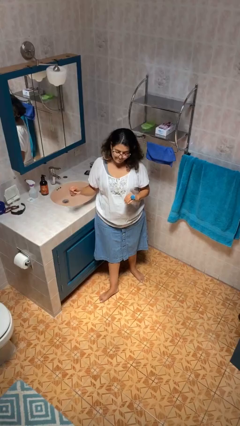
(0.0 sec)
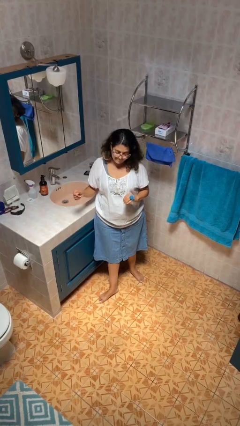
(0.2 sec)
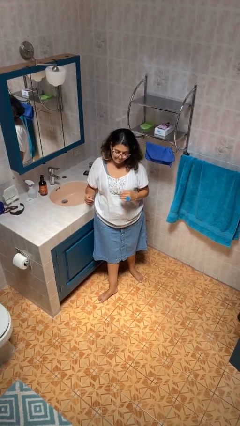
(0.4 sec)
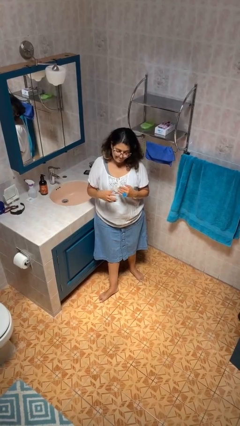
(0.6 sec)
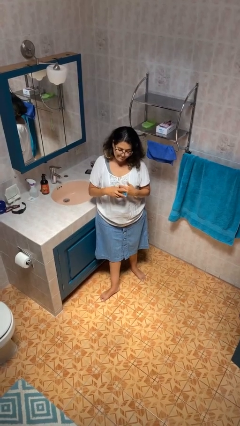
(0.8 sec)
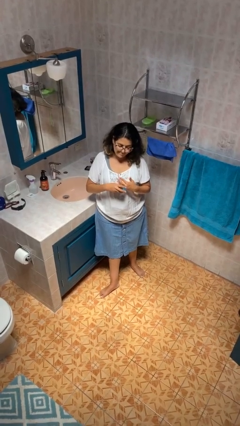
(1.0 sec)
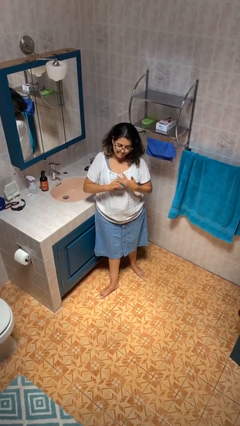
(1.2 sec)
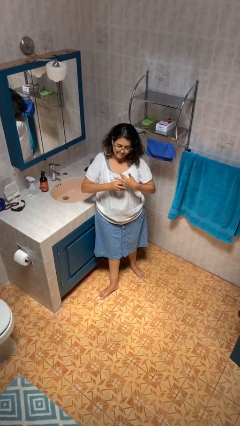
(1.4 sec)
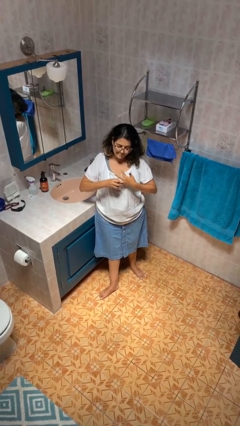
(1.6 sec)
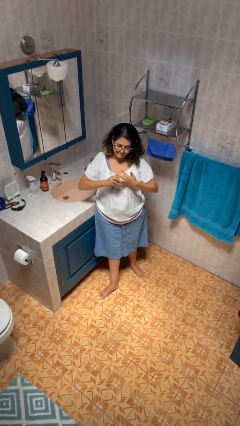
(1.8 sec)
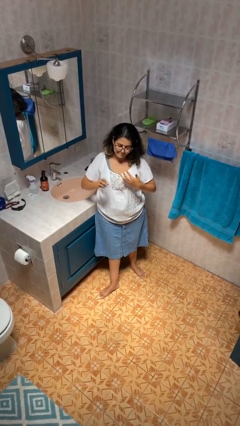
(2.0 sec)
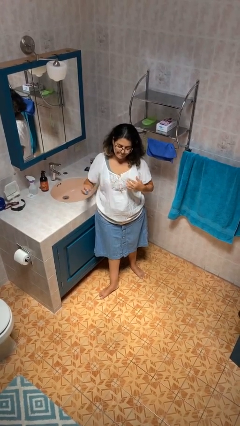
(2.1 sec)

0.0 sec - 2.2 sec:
person takes off ring

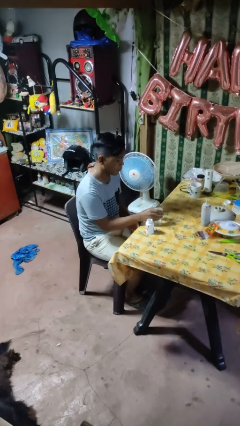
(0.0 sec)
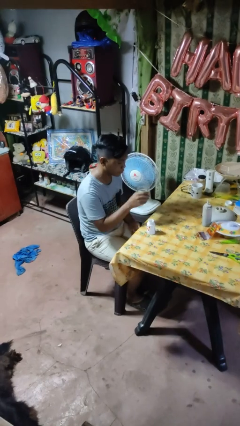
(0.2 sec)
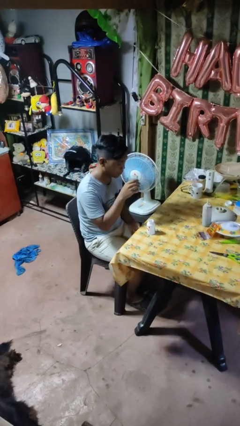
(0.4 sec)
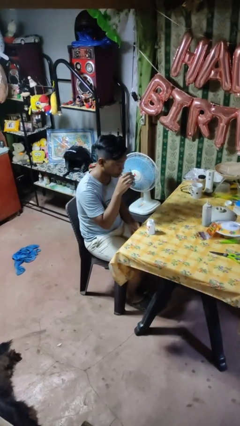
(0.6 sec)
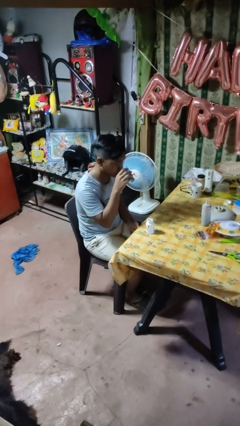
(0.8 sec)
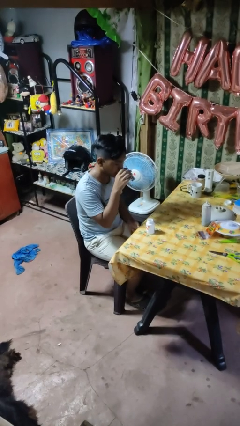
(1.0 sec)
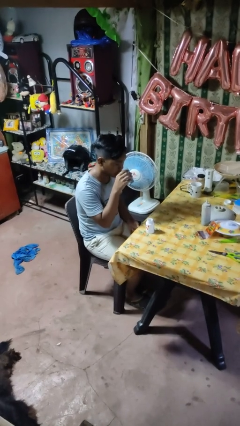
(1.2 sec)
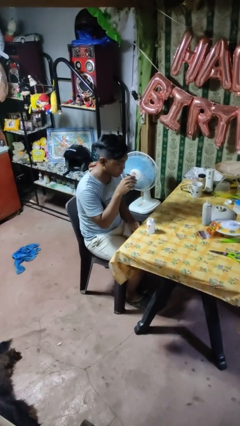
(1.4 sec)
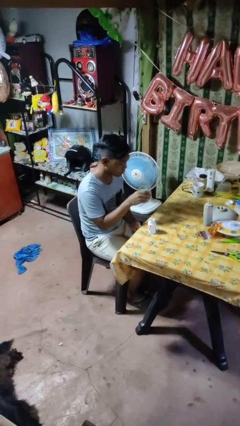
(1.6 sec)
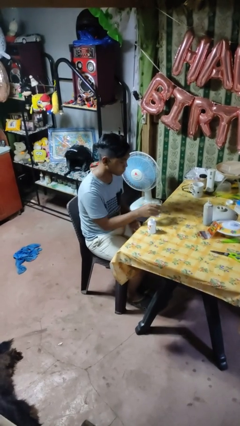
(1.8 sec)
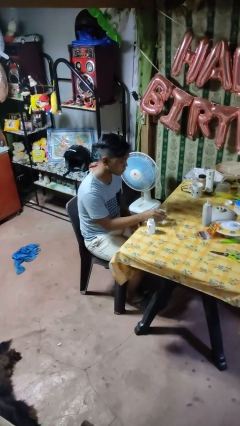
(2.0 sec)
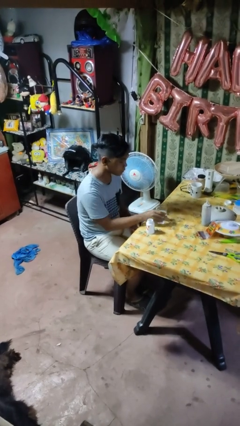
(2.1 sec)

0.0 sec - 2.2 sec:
person drinks from cup

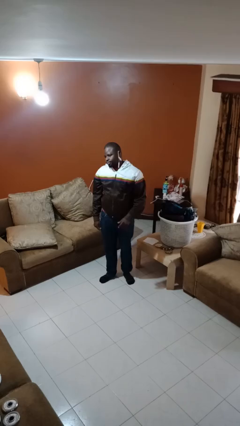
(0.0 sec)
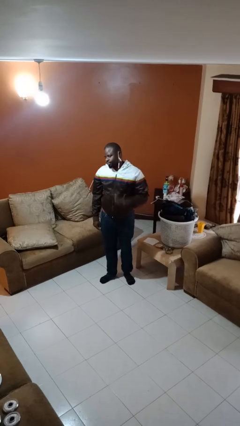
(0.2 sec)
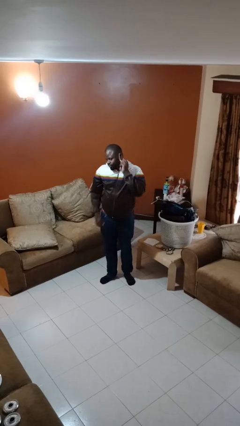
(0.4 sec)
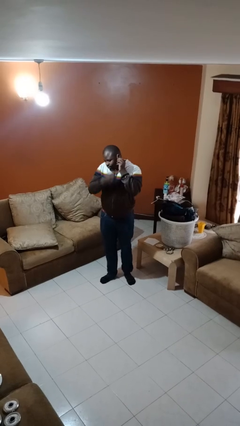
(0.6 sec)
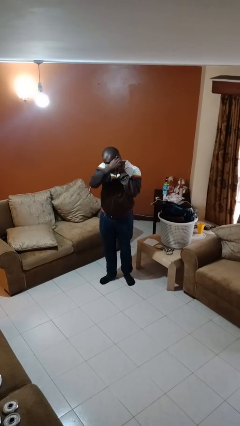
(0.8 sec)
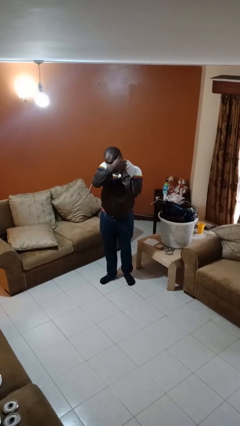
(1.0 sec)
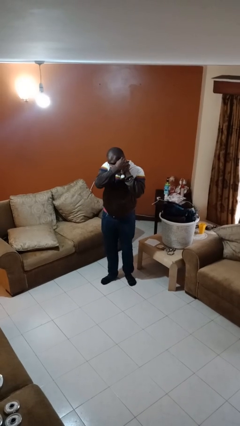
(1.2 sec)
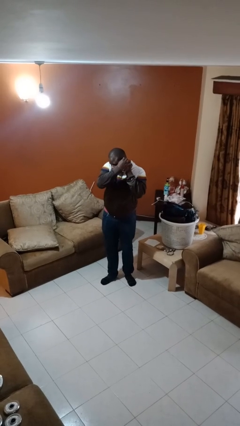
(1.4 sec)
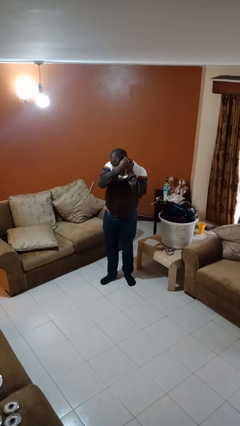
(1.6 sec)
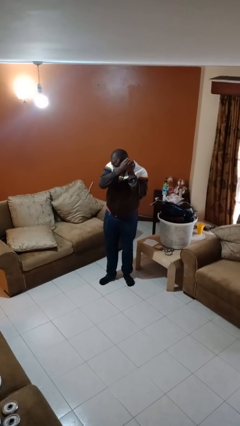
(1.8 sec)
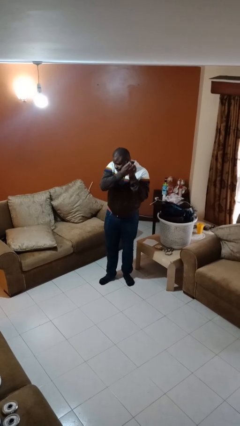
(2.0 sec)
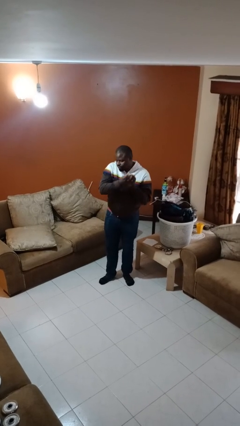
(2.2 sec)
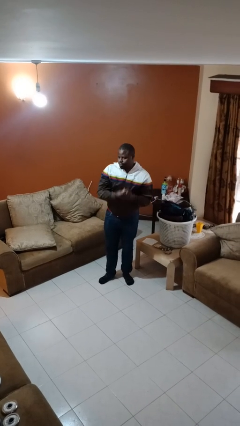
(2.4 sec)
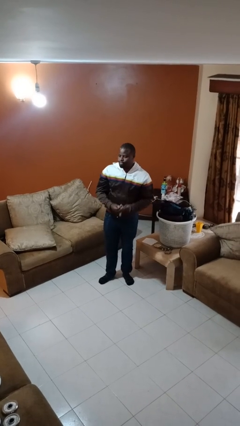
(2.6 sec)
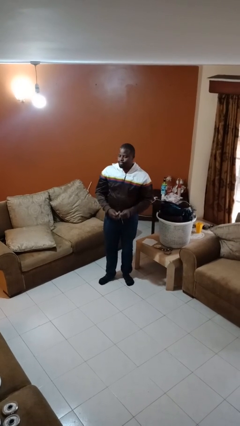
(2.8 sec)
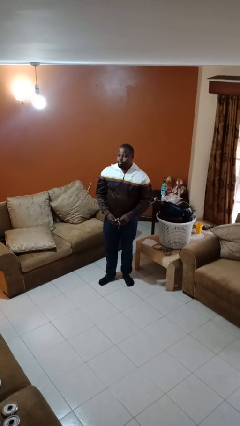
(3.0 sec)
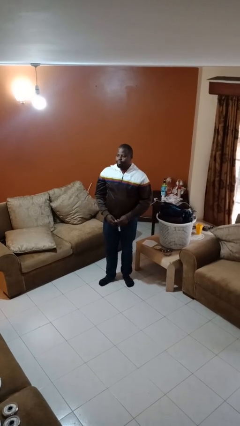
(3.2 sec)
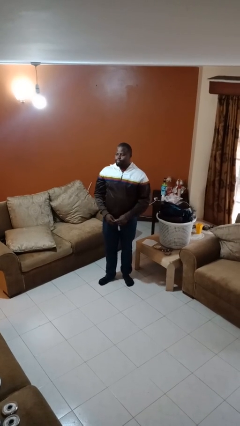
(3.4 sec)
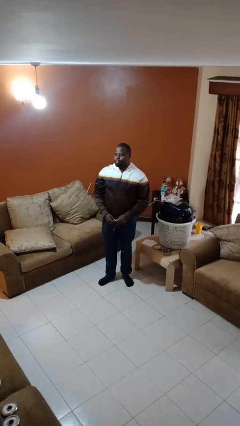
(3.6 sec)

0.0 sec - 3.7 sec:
person takes off earrings

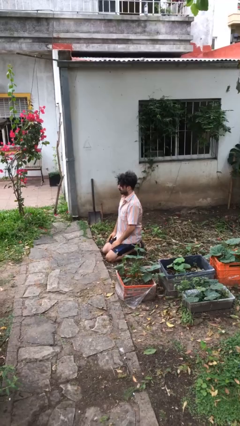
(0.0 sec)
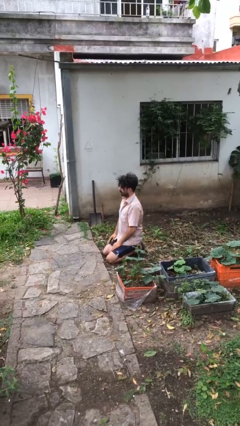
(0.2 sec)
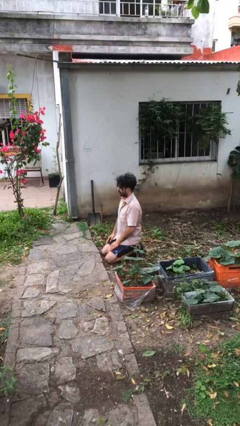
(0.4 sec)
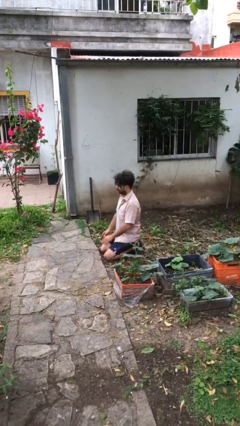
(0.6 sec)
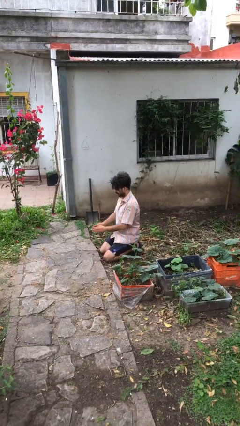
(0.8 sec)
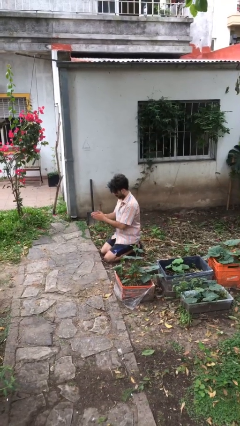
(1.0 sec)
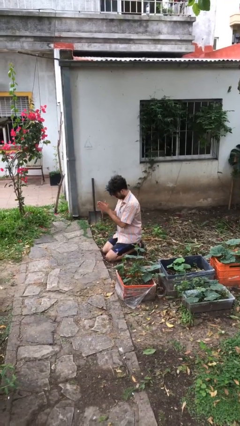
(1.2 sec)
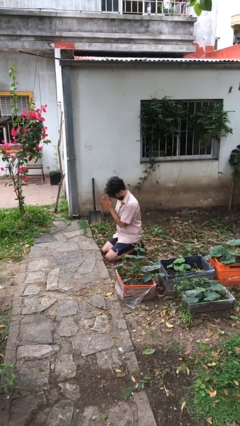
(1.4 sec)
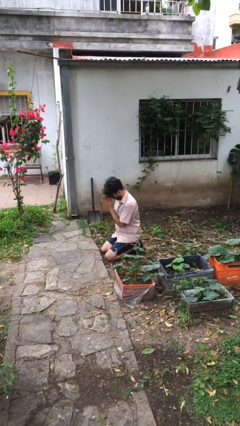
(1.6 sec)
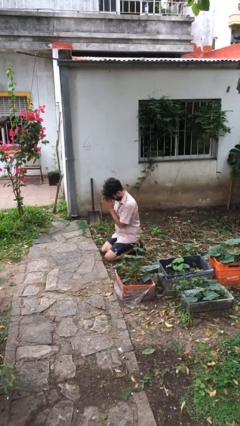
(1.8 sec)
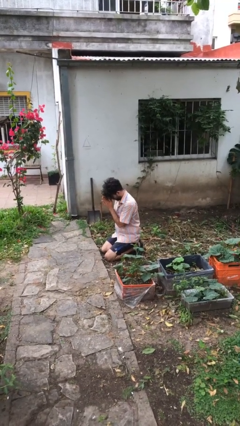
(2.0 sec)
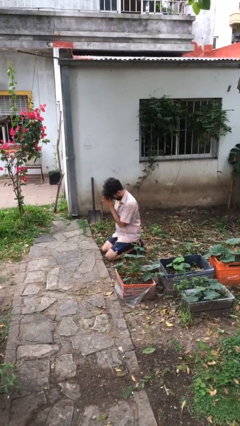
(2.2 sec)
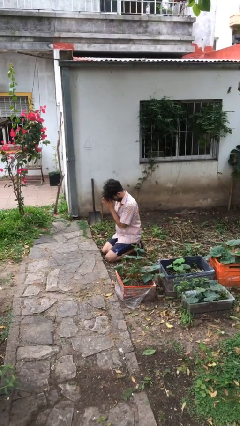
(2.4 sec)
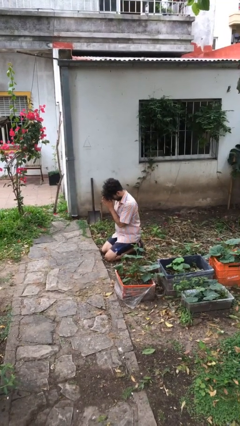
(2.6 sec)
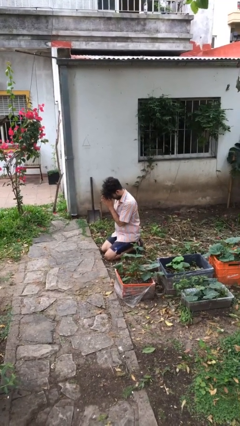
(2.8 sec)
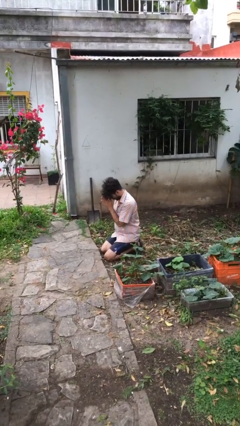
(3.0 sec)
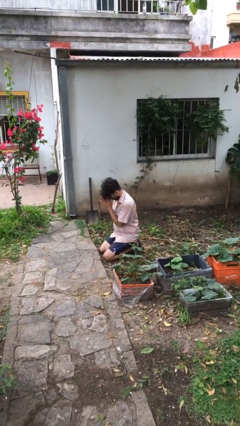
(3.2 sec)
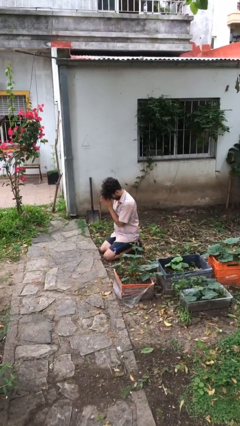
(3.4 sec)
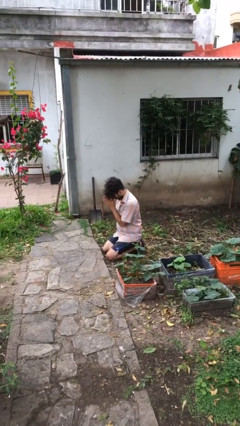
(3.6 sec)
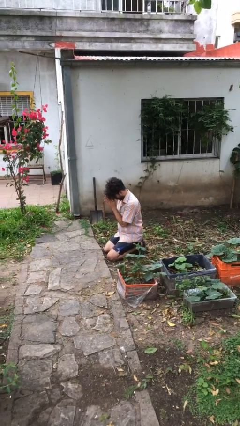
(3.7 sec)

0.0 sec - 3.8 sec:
person prays

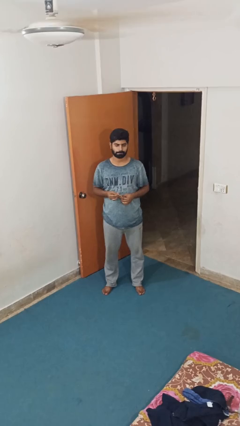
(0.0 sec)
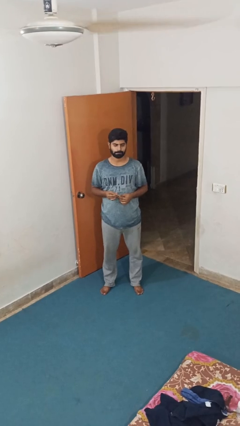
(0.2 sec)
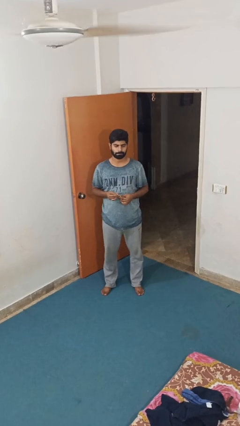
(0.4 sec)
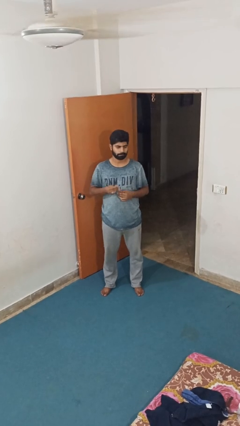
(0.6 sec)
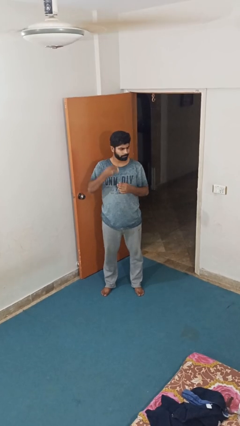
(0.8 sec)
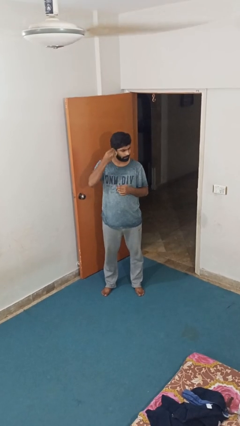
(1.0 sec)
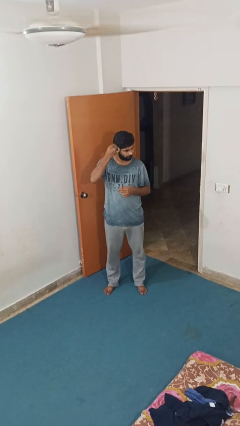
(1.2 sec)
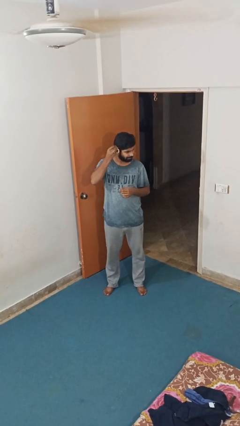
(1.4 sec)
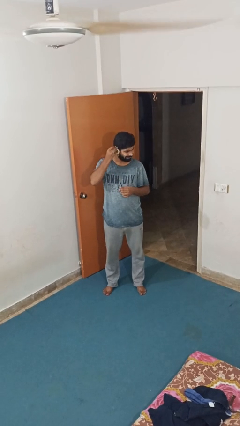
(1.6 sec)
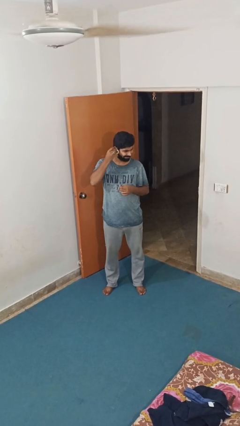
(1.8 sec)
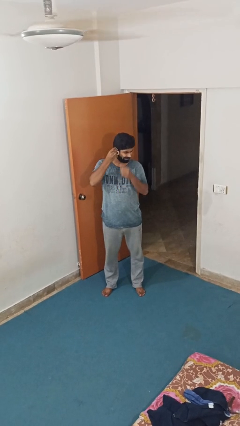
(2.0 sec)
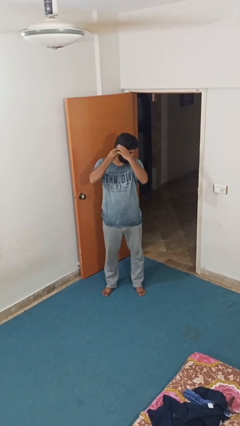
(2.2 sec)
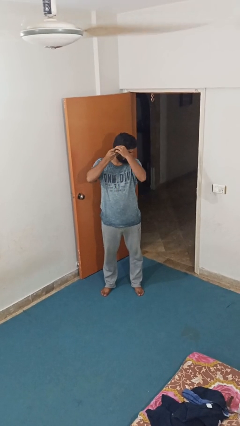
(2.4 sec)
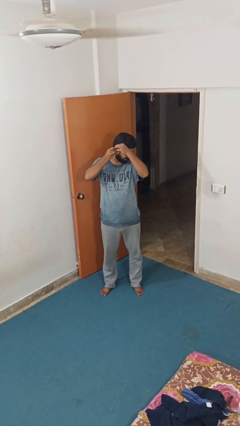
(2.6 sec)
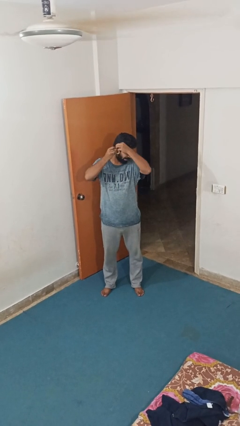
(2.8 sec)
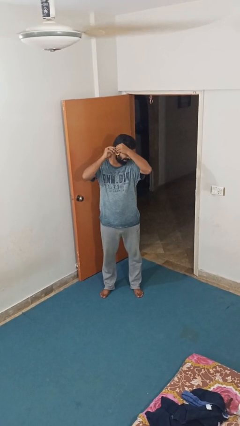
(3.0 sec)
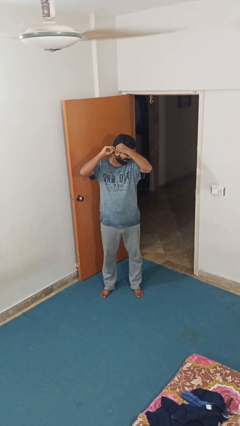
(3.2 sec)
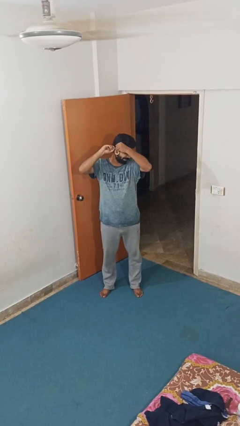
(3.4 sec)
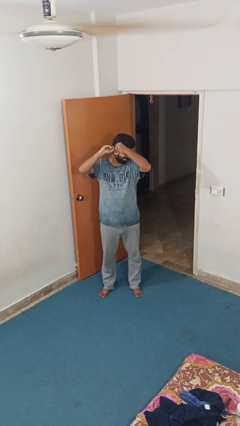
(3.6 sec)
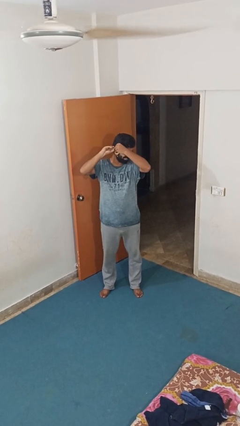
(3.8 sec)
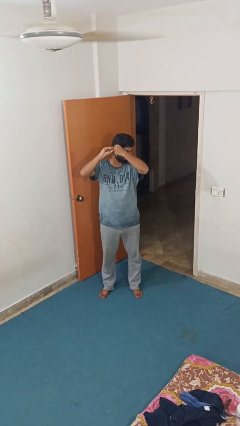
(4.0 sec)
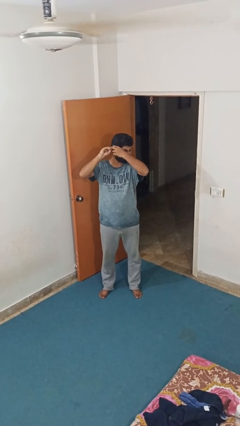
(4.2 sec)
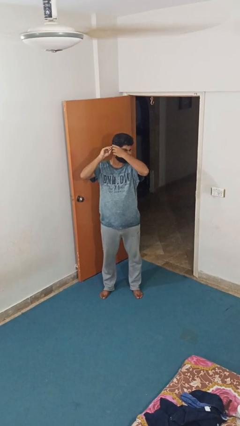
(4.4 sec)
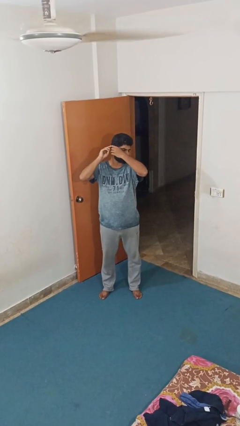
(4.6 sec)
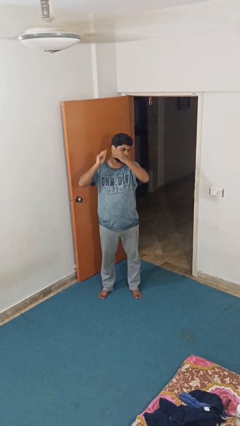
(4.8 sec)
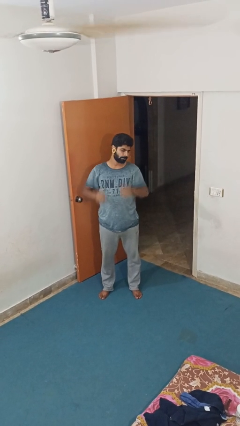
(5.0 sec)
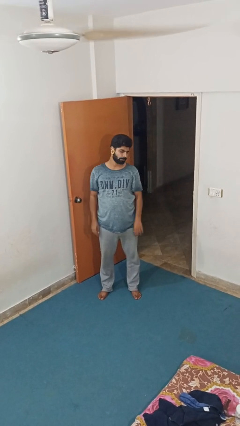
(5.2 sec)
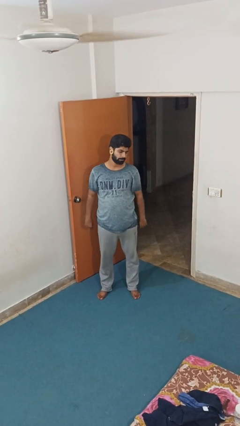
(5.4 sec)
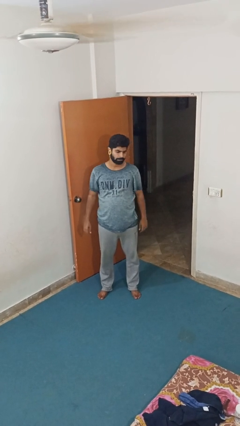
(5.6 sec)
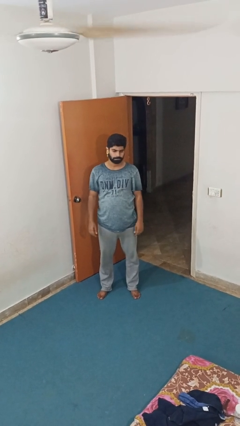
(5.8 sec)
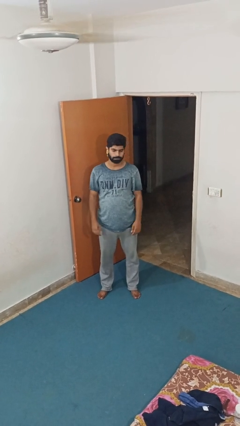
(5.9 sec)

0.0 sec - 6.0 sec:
person puts on earrings
